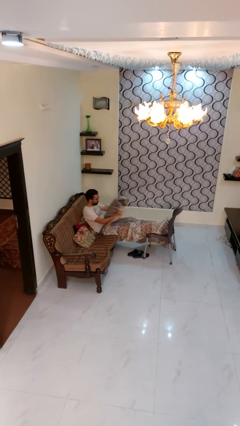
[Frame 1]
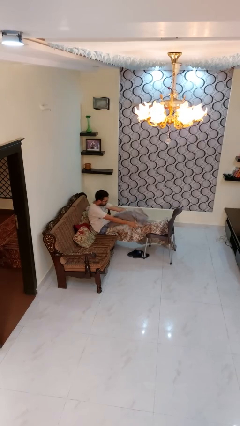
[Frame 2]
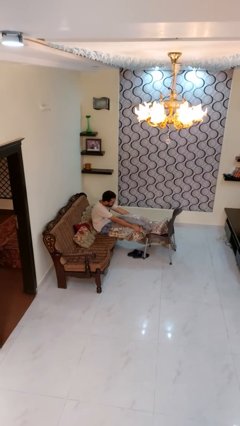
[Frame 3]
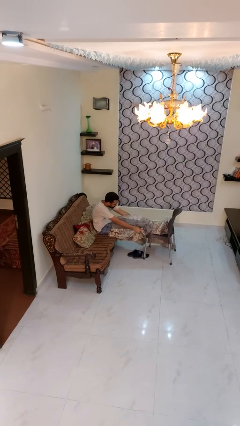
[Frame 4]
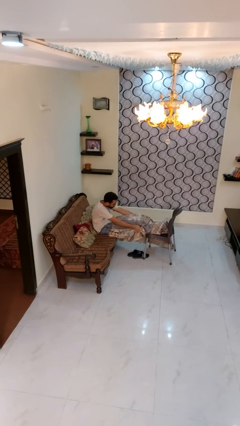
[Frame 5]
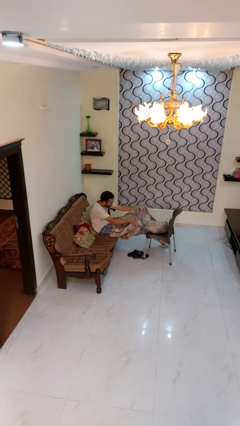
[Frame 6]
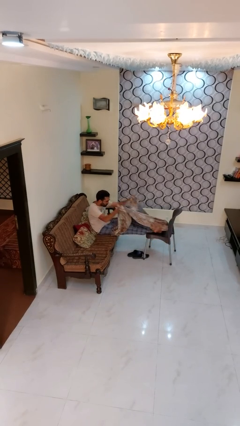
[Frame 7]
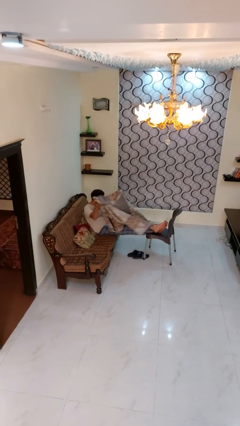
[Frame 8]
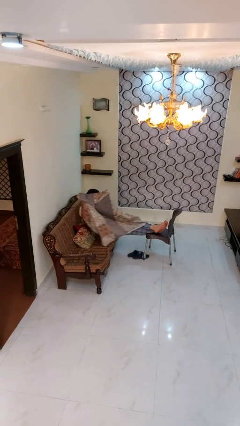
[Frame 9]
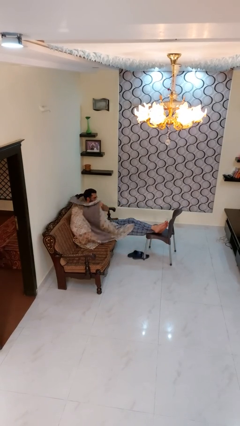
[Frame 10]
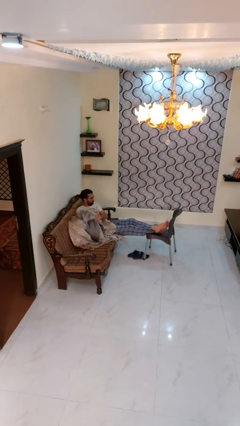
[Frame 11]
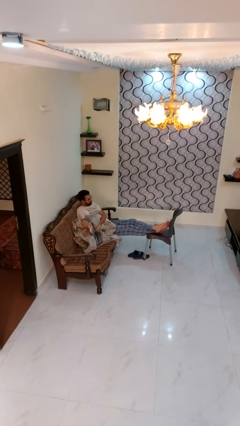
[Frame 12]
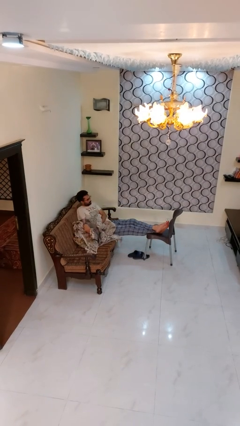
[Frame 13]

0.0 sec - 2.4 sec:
person uncovers with blanket

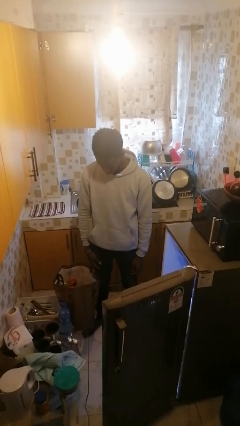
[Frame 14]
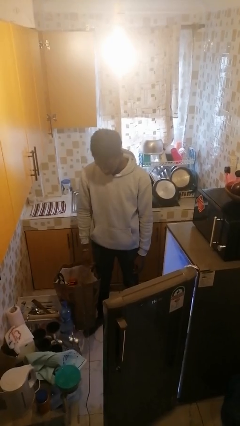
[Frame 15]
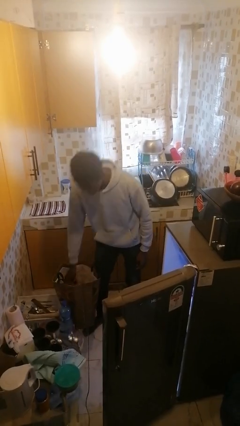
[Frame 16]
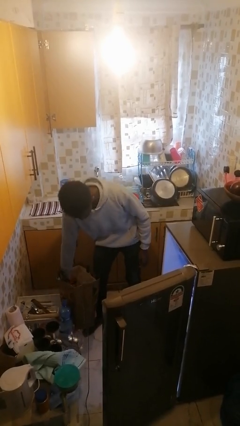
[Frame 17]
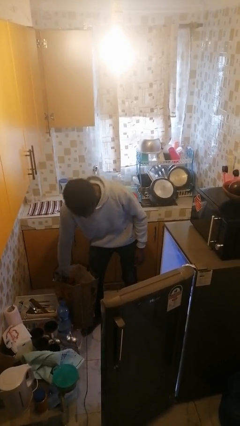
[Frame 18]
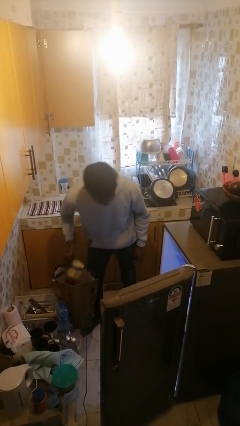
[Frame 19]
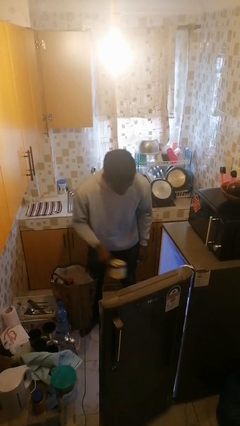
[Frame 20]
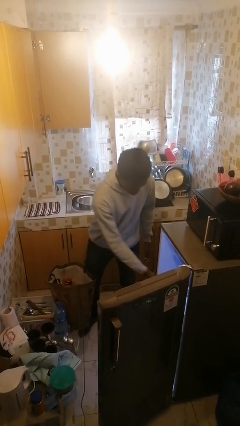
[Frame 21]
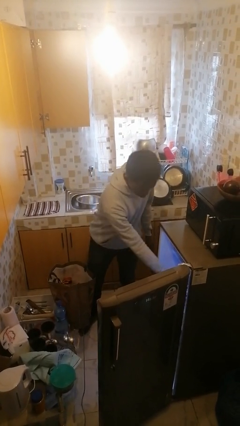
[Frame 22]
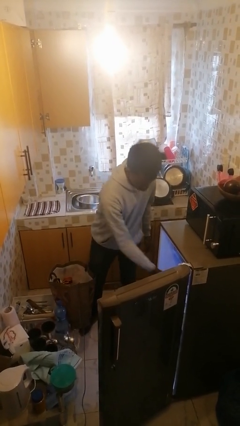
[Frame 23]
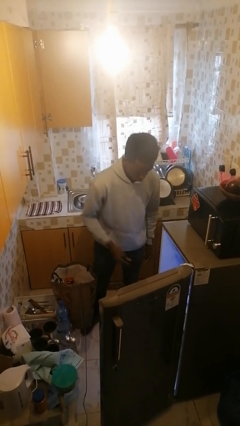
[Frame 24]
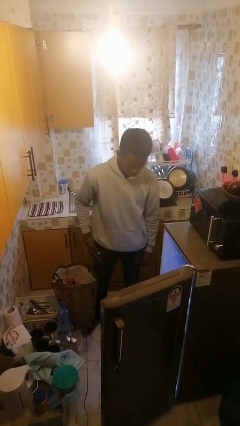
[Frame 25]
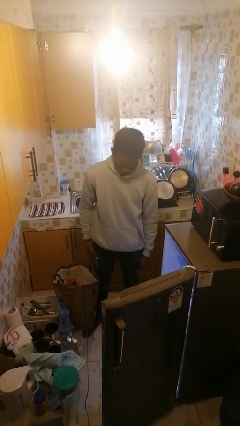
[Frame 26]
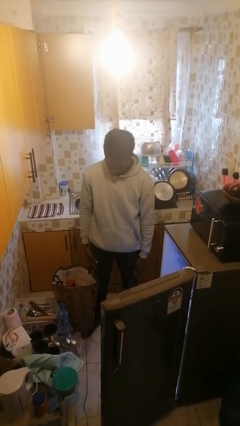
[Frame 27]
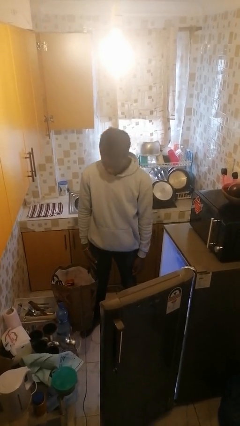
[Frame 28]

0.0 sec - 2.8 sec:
person loads groceries into refrigerator

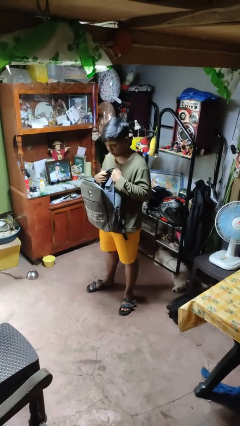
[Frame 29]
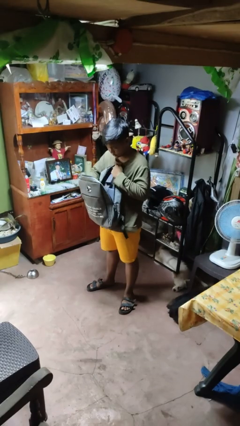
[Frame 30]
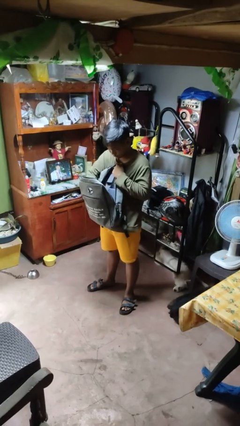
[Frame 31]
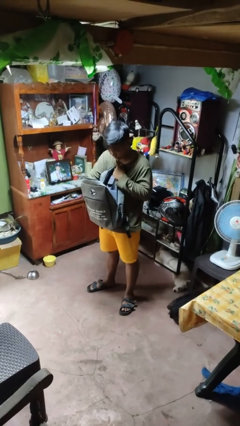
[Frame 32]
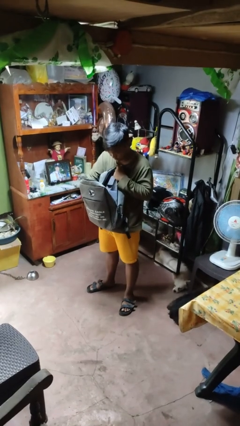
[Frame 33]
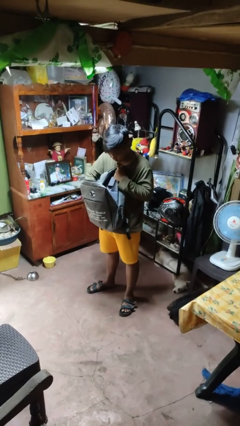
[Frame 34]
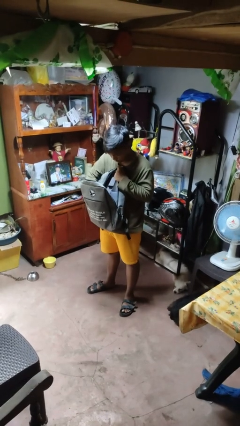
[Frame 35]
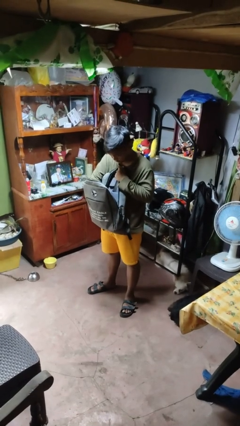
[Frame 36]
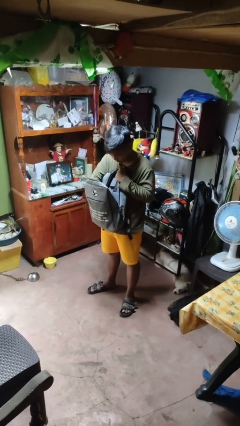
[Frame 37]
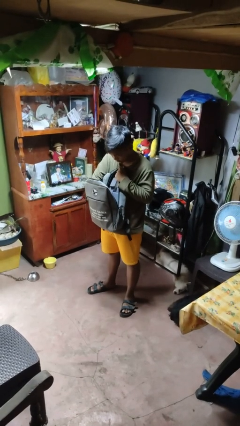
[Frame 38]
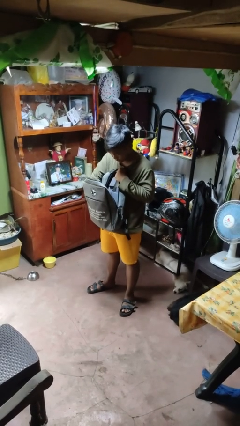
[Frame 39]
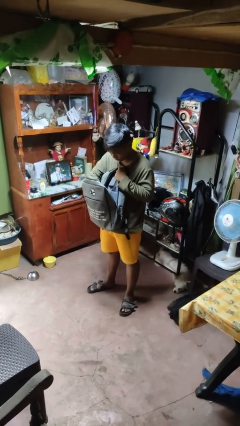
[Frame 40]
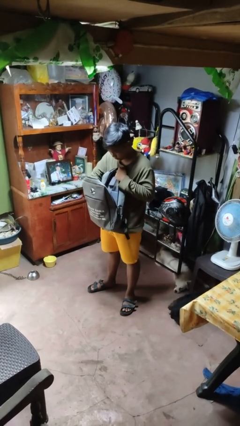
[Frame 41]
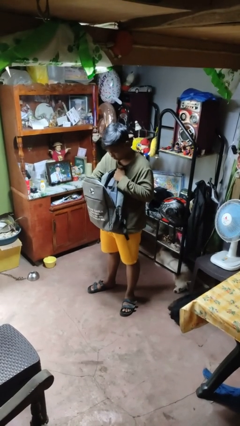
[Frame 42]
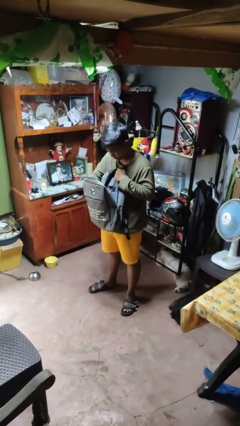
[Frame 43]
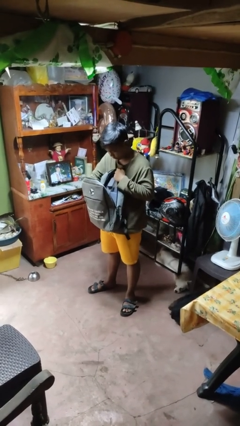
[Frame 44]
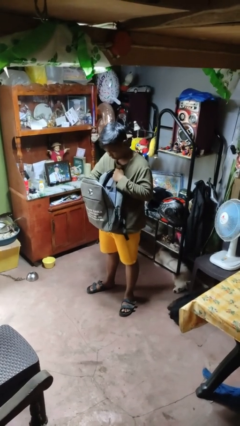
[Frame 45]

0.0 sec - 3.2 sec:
person searches in backpack

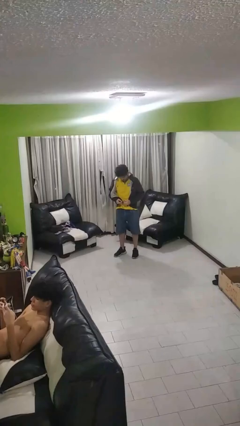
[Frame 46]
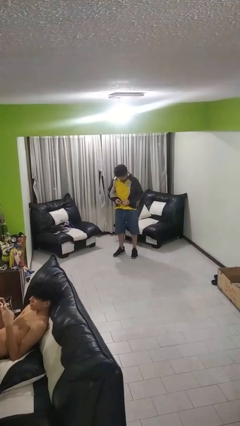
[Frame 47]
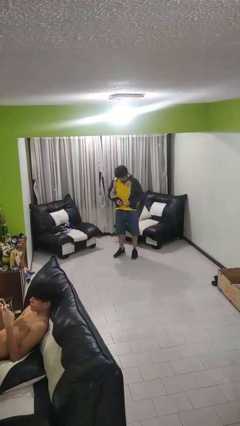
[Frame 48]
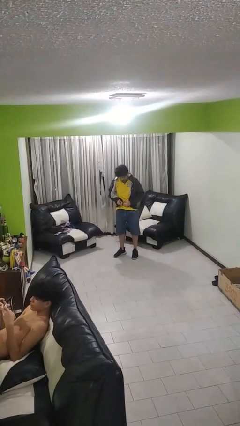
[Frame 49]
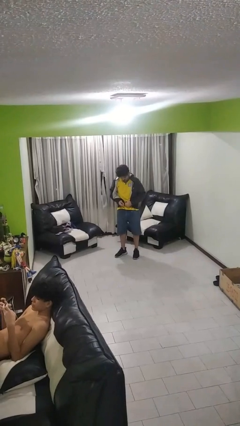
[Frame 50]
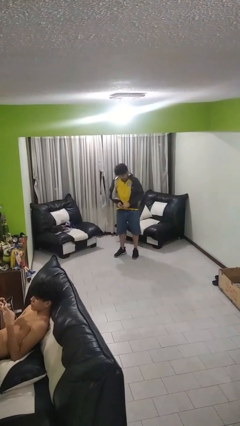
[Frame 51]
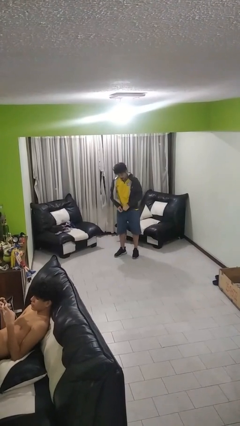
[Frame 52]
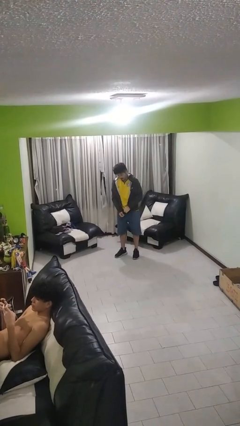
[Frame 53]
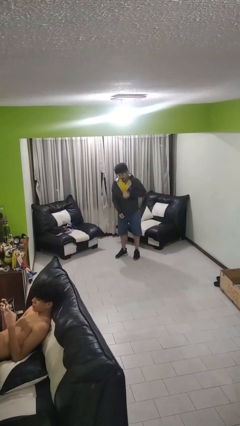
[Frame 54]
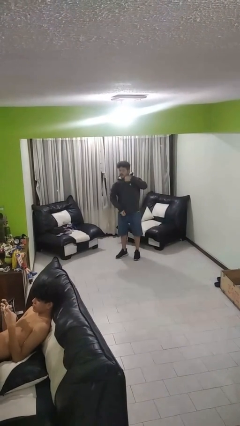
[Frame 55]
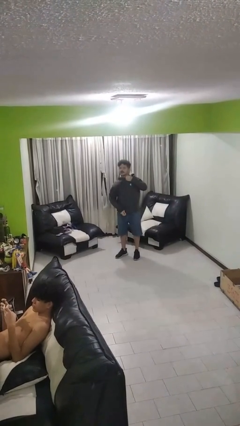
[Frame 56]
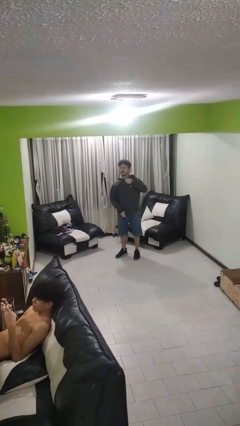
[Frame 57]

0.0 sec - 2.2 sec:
person zips up jacket

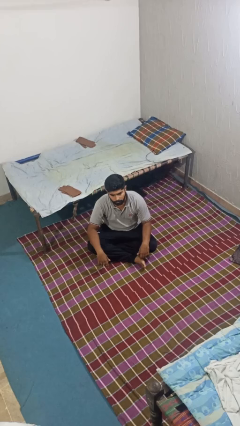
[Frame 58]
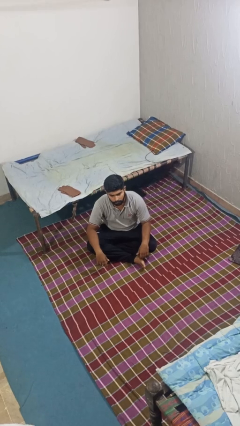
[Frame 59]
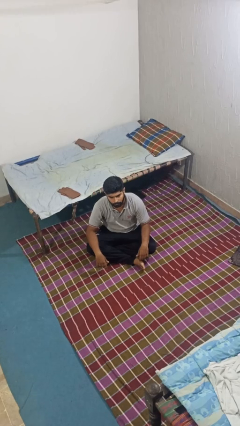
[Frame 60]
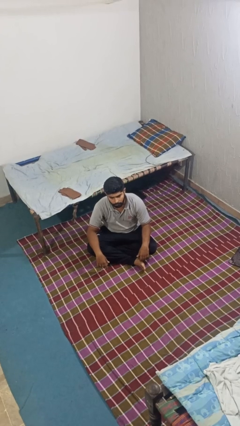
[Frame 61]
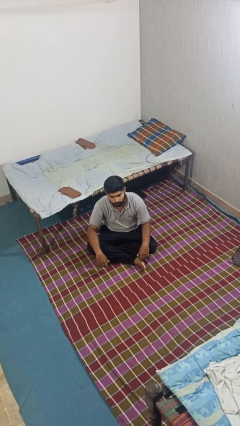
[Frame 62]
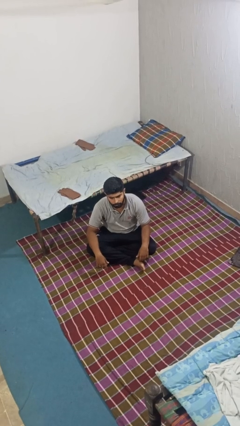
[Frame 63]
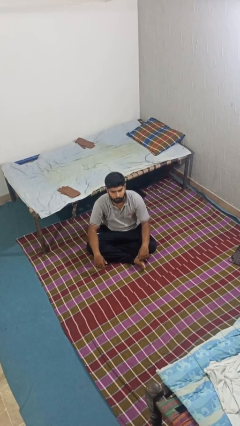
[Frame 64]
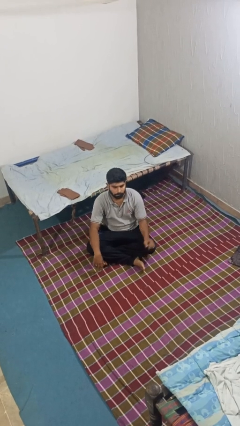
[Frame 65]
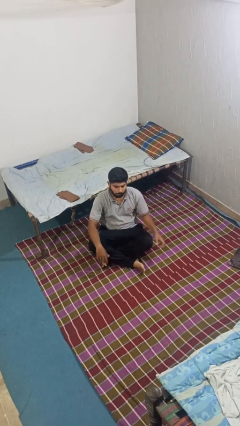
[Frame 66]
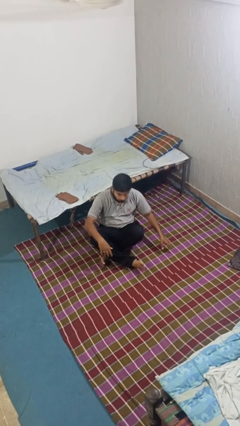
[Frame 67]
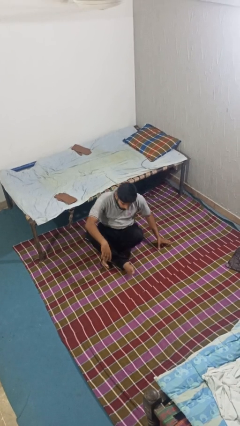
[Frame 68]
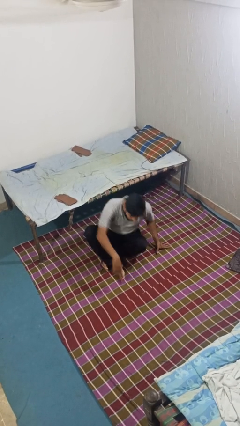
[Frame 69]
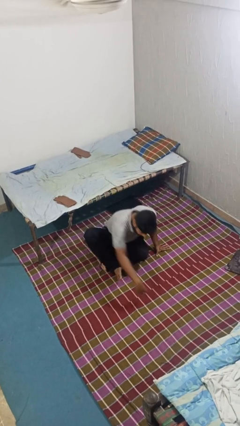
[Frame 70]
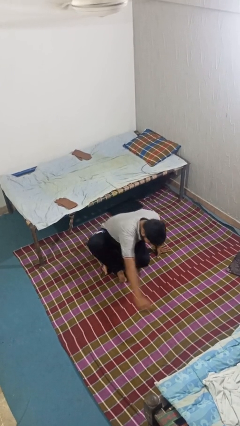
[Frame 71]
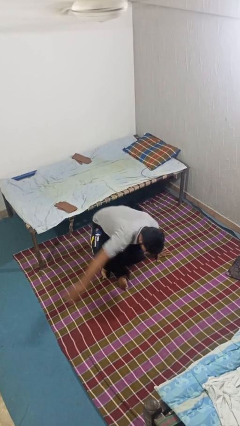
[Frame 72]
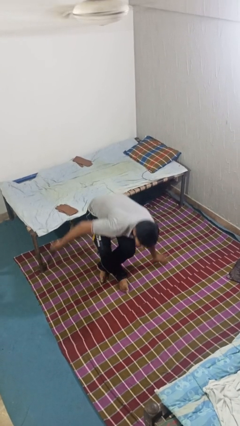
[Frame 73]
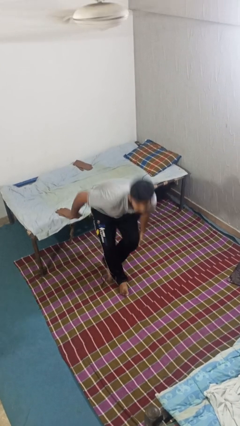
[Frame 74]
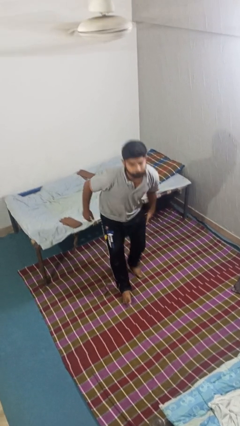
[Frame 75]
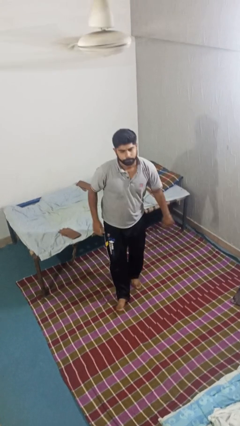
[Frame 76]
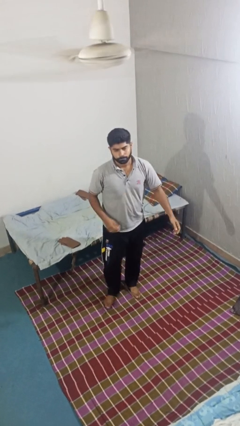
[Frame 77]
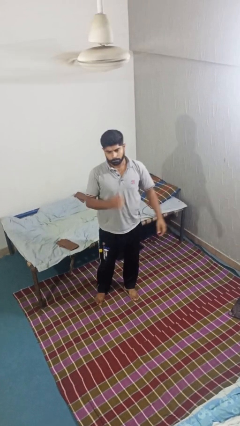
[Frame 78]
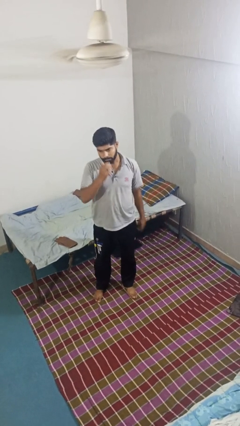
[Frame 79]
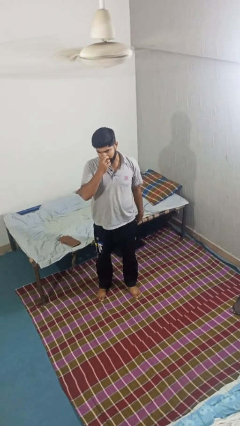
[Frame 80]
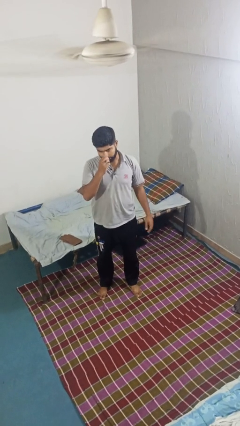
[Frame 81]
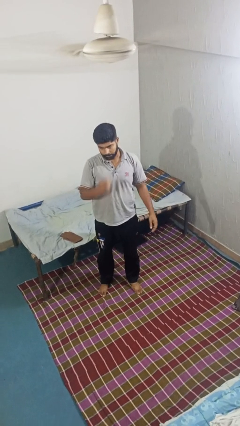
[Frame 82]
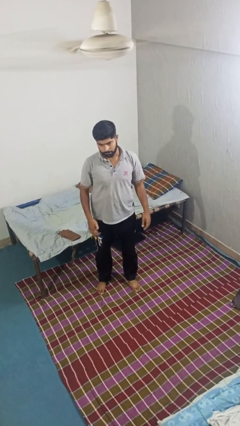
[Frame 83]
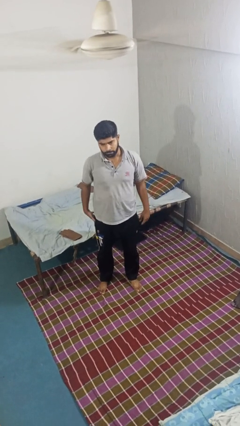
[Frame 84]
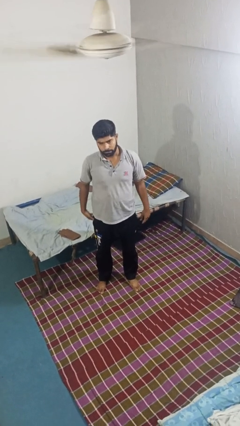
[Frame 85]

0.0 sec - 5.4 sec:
person stands up from floor

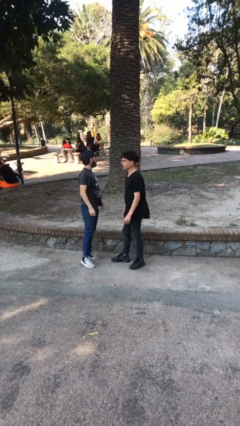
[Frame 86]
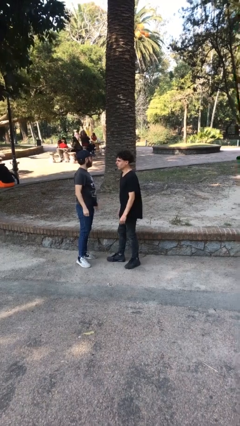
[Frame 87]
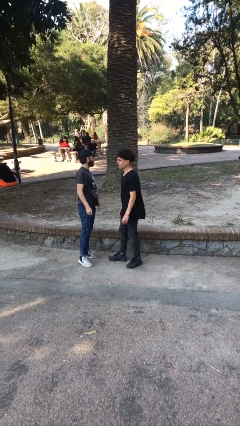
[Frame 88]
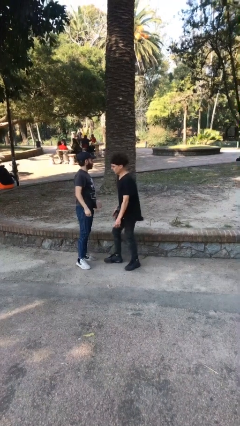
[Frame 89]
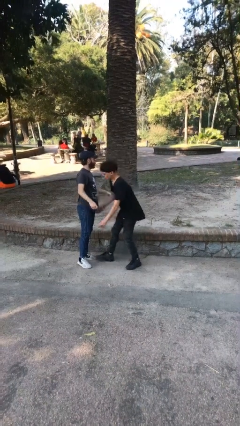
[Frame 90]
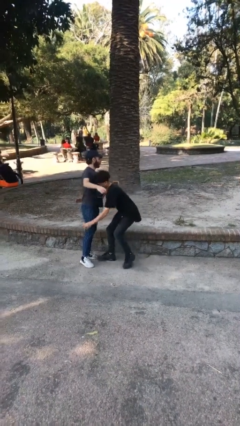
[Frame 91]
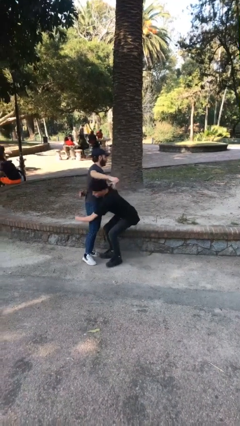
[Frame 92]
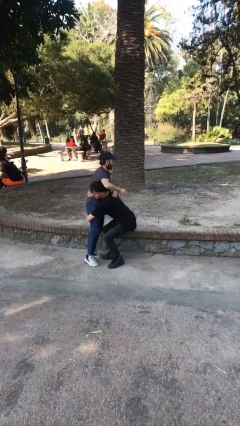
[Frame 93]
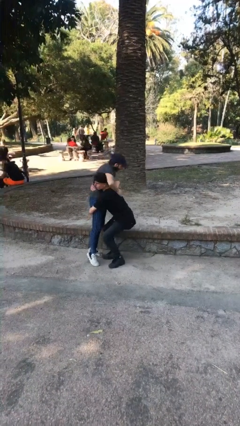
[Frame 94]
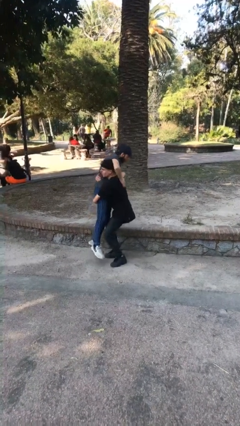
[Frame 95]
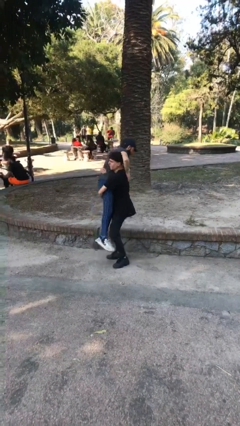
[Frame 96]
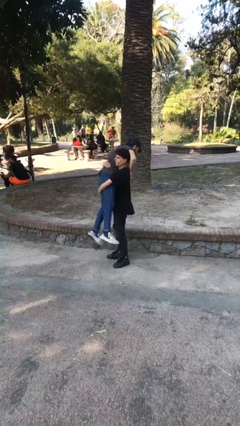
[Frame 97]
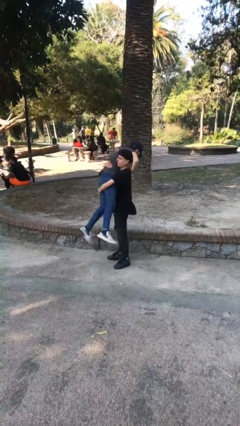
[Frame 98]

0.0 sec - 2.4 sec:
person picks up person
